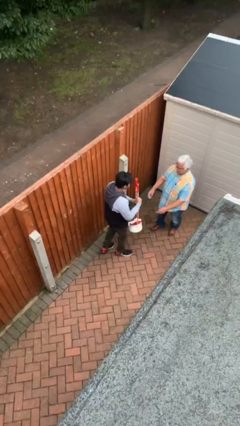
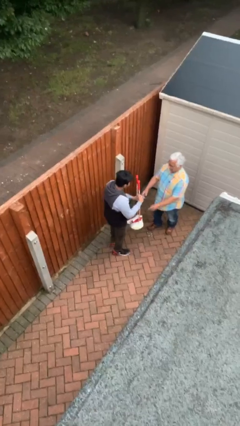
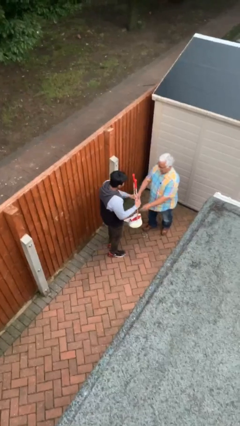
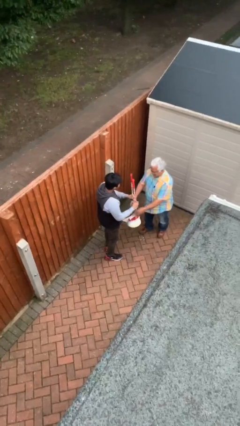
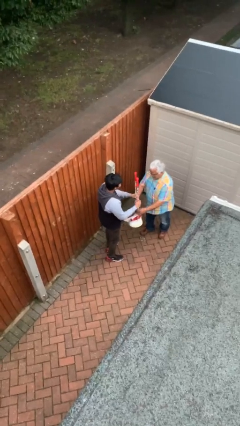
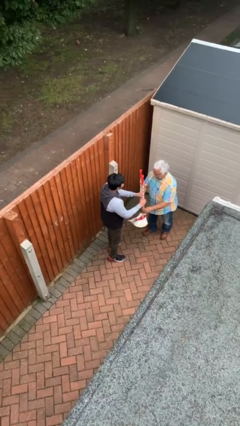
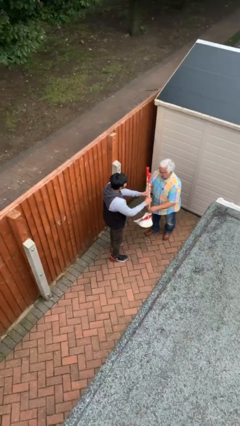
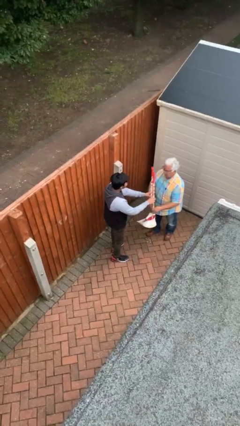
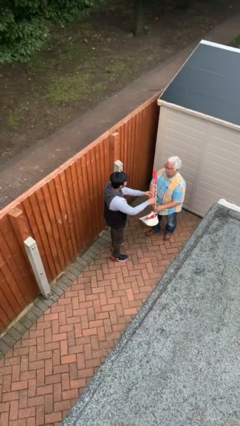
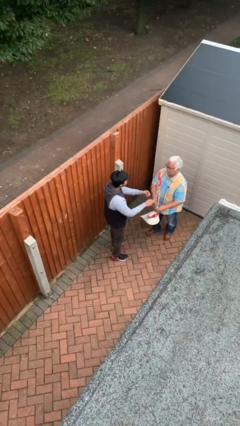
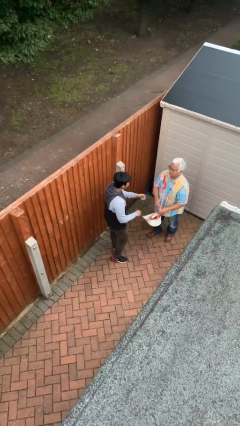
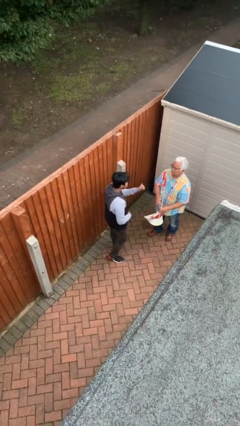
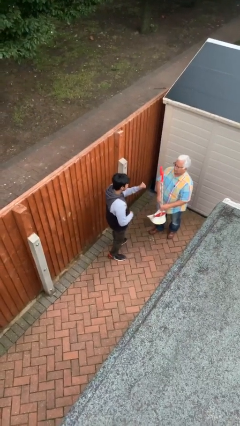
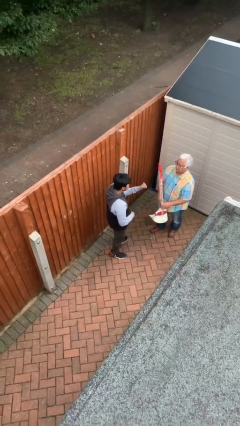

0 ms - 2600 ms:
person transfers object to person

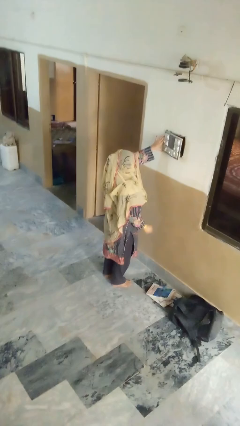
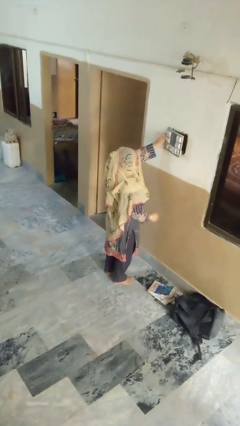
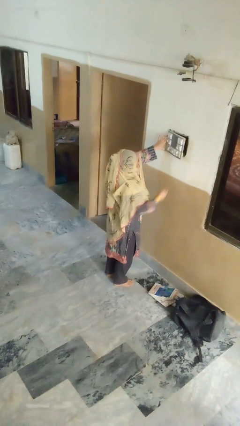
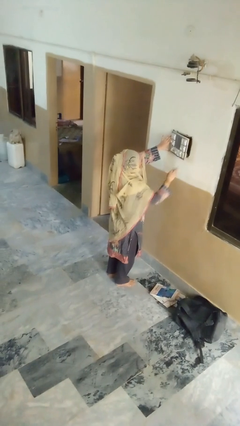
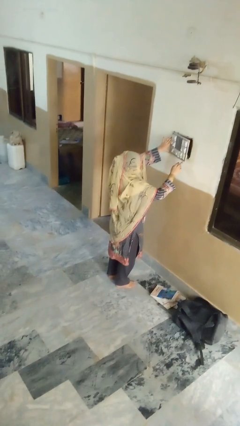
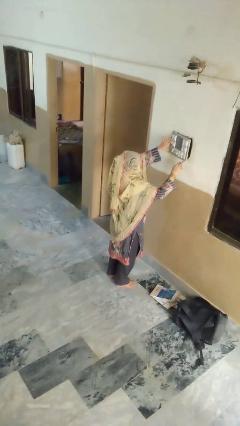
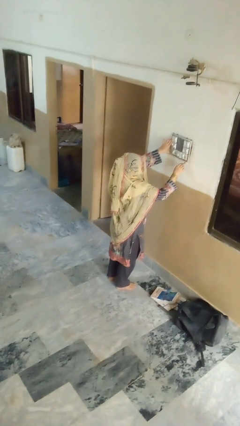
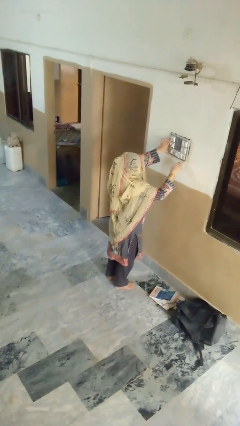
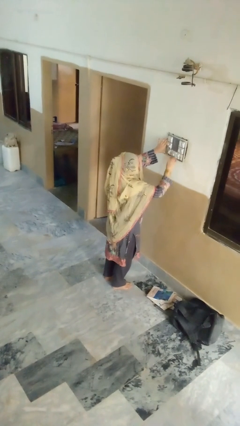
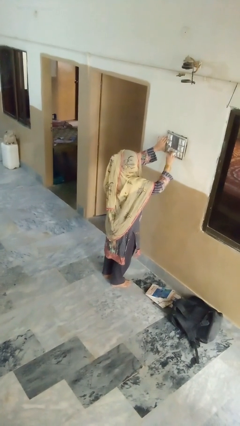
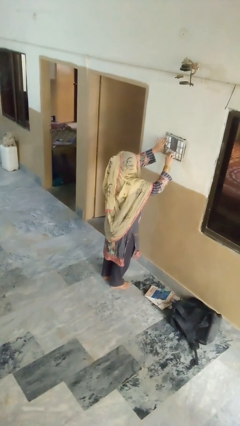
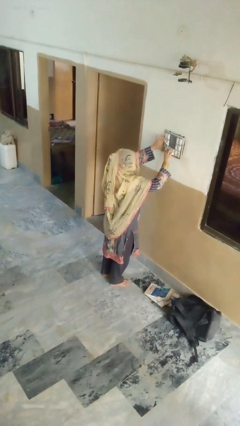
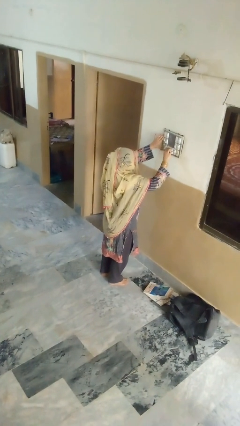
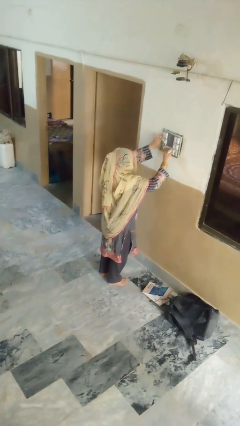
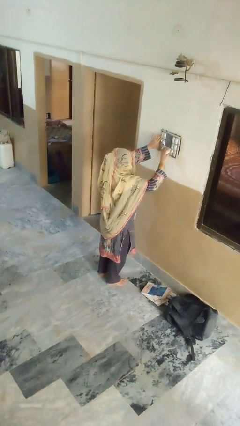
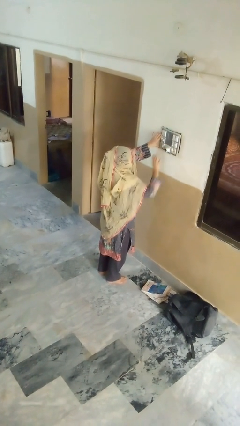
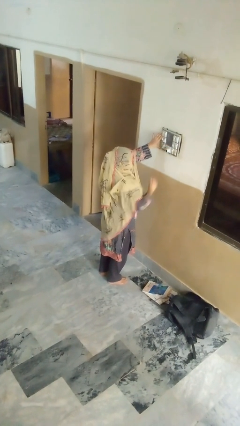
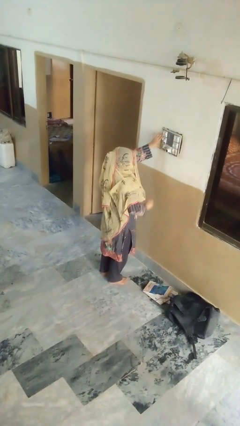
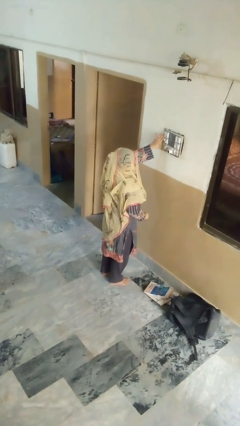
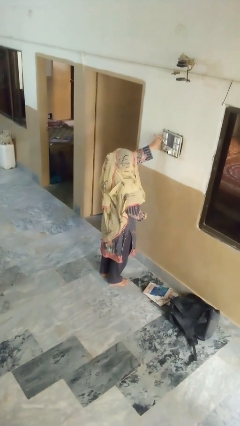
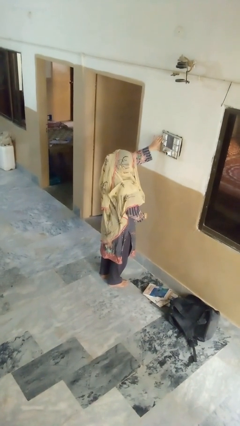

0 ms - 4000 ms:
person plugs into electrical socket

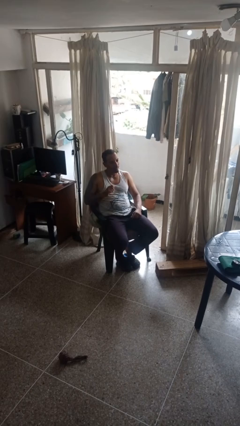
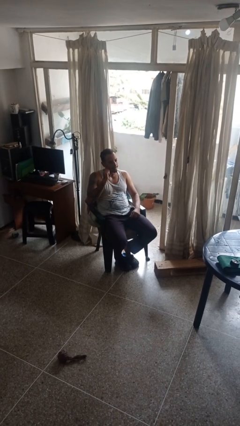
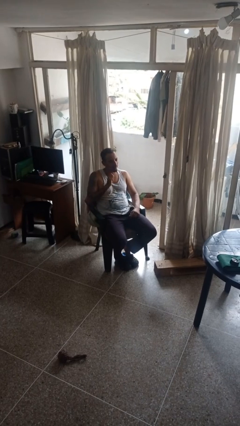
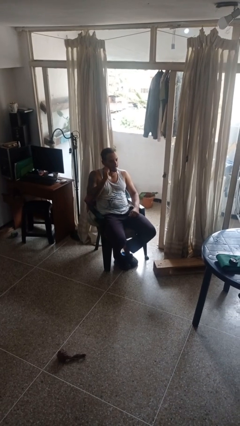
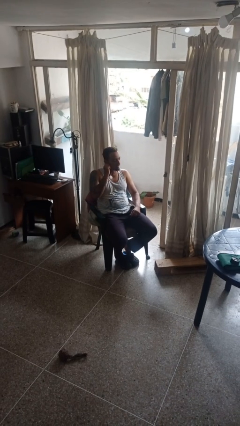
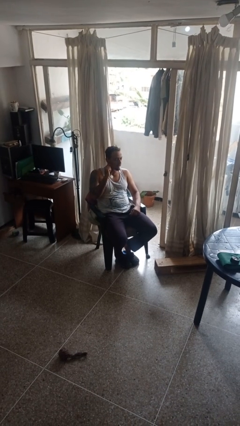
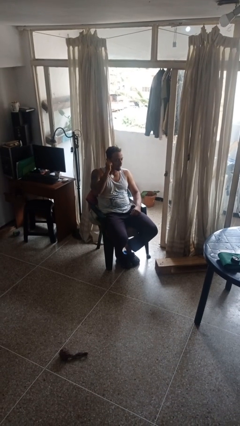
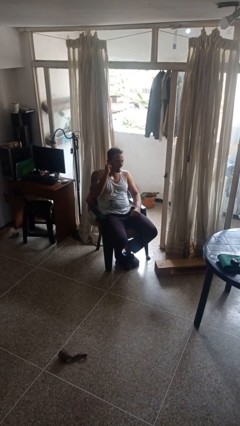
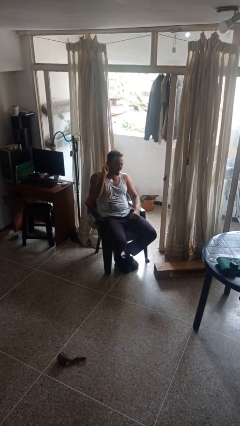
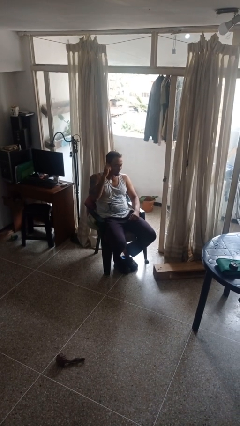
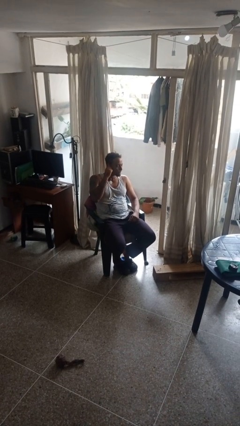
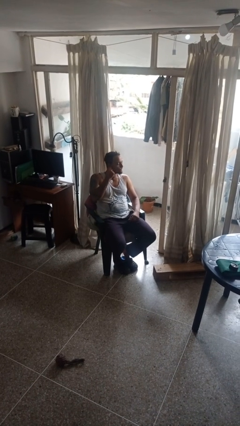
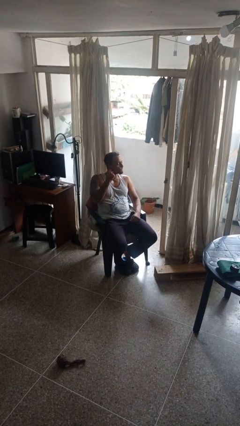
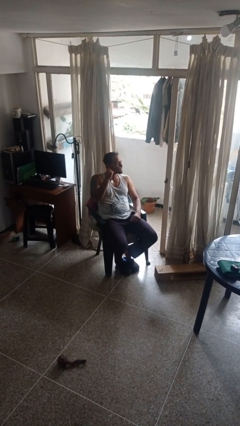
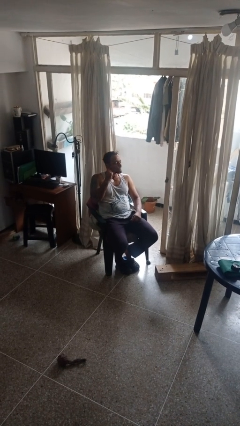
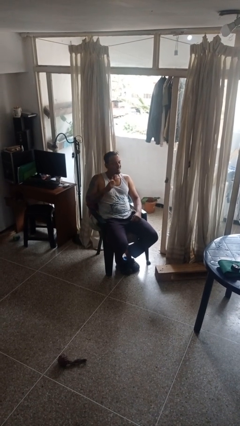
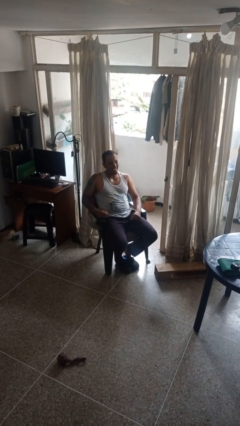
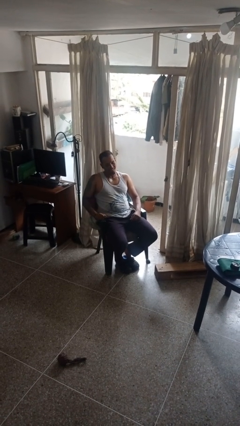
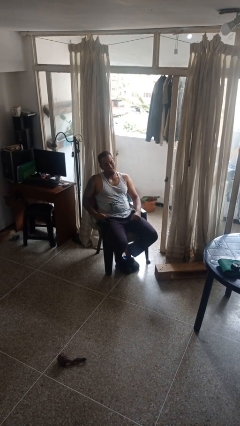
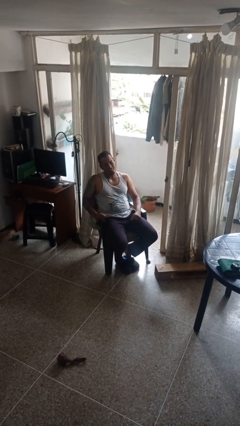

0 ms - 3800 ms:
person touches earlobe

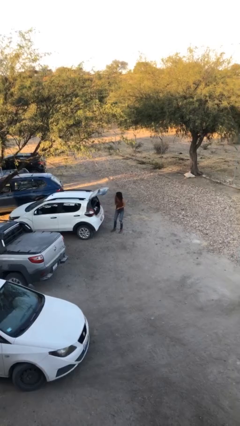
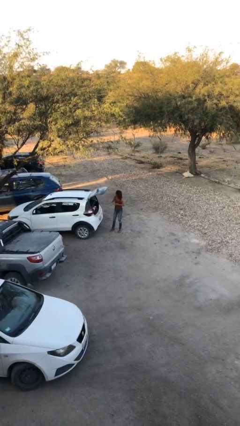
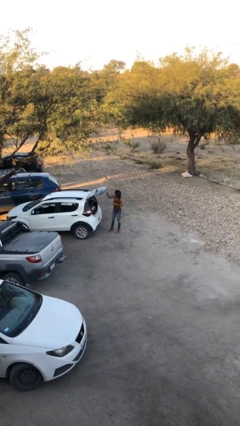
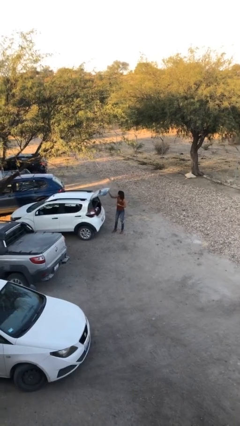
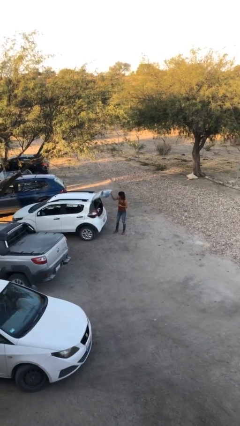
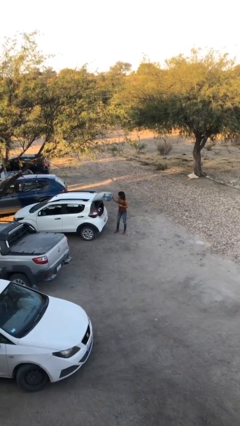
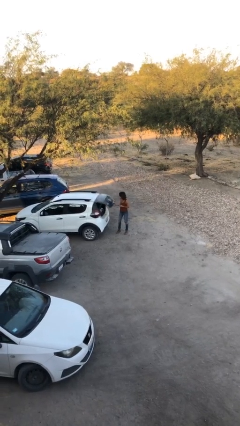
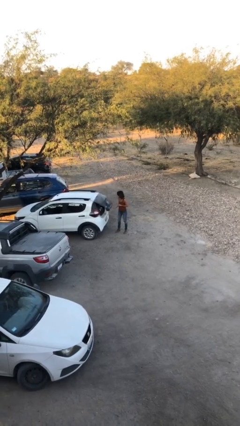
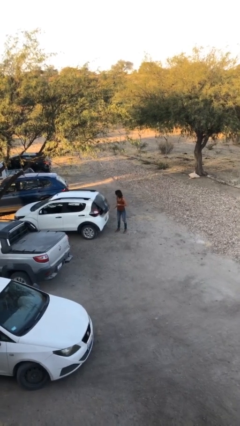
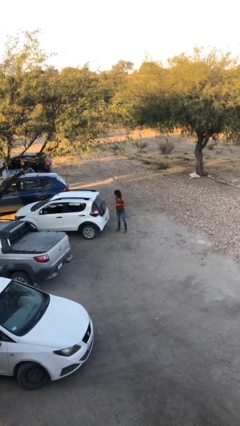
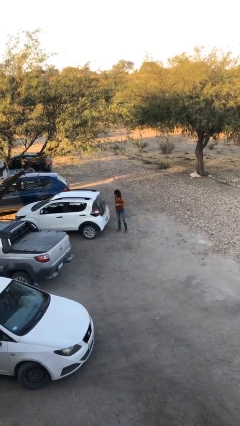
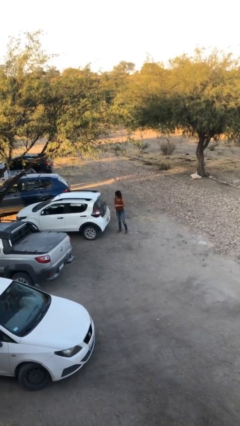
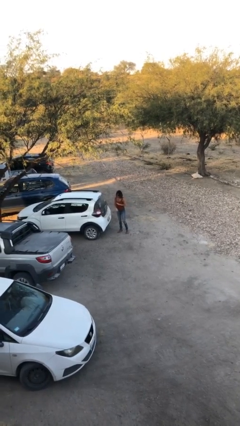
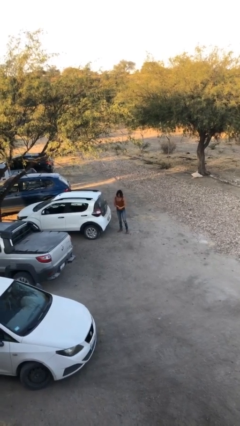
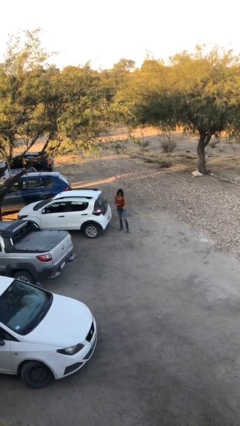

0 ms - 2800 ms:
person closes car trunk

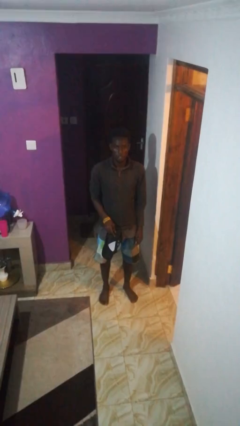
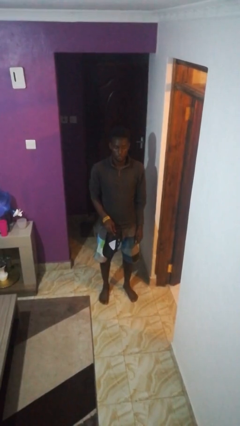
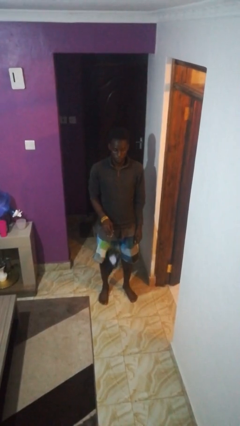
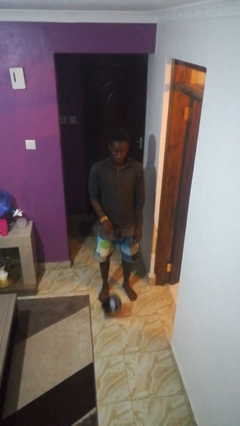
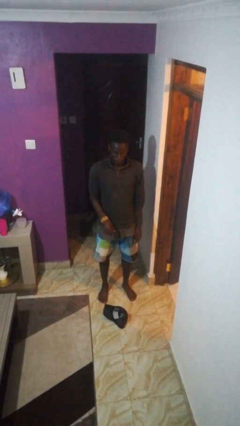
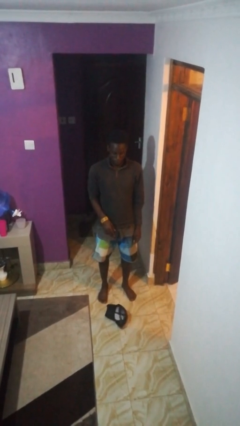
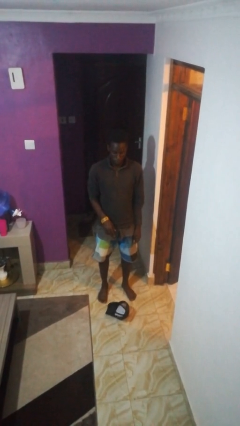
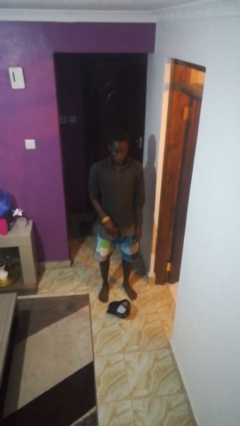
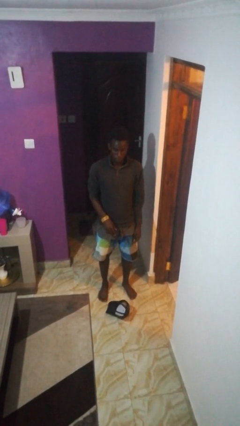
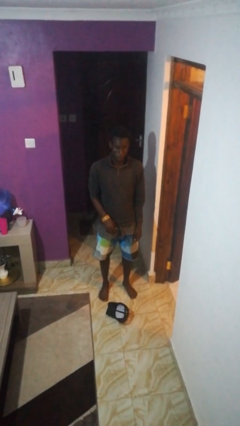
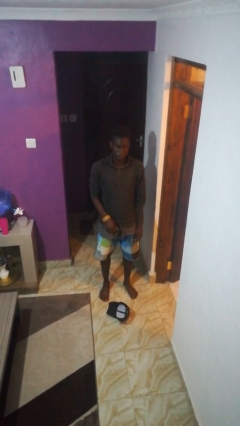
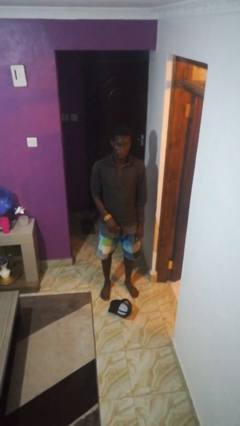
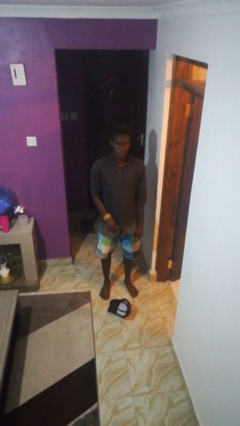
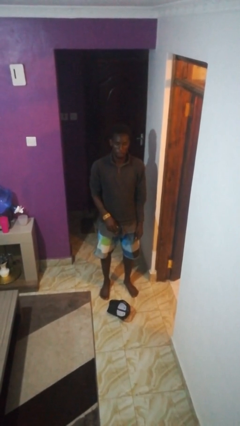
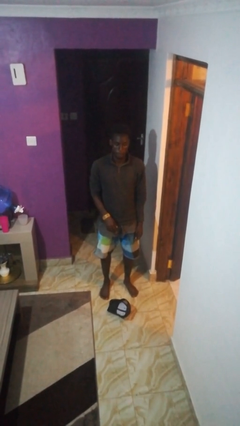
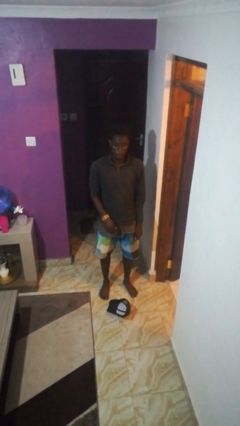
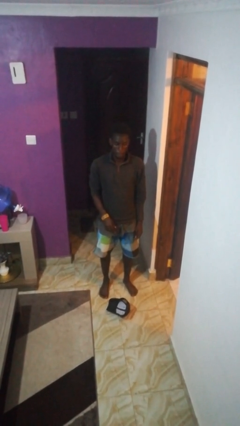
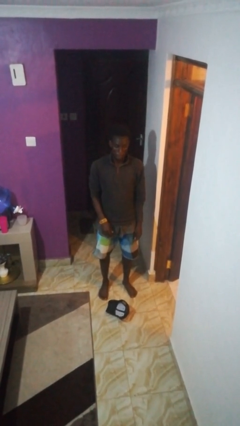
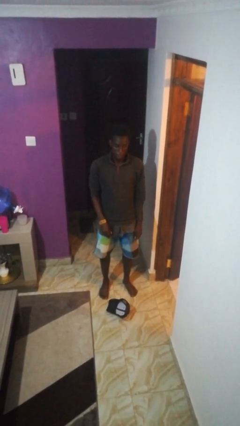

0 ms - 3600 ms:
person drops object

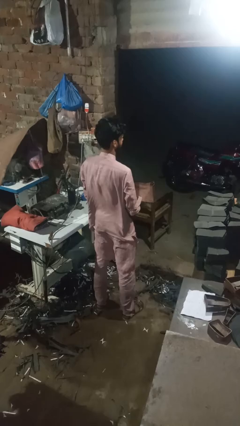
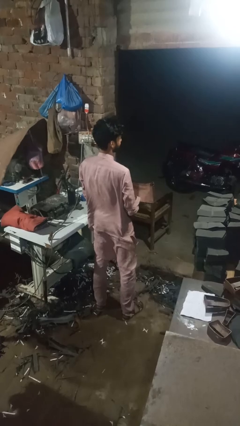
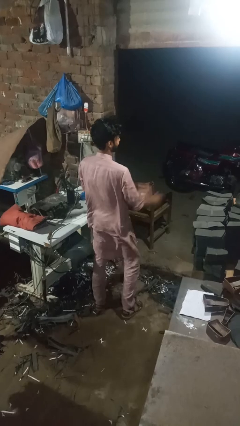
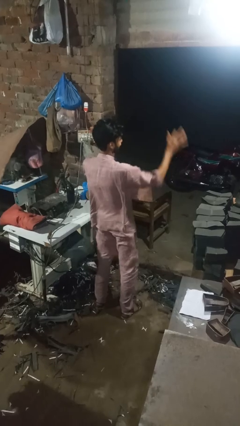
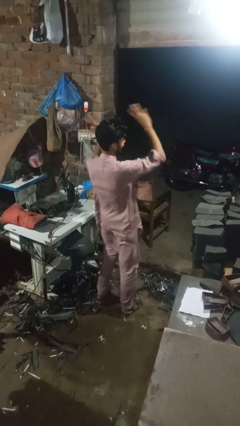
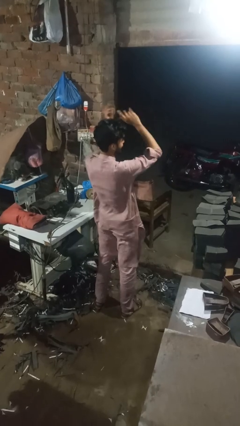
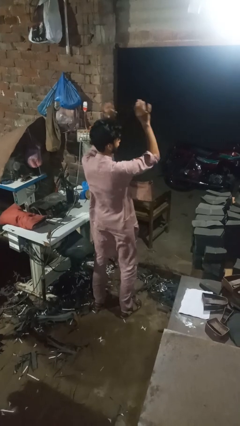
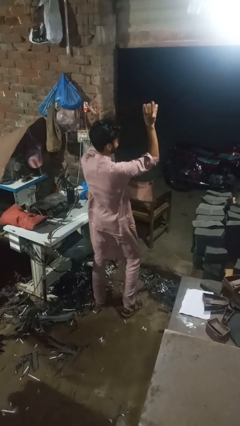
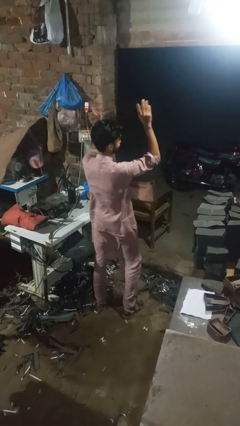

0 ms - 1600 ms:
person dances in place
